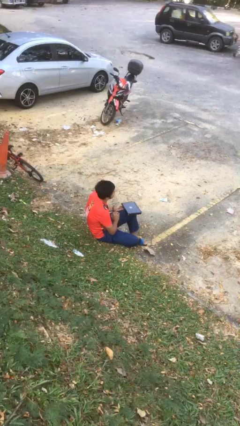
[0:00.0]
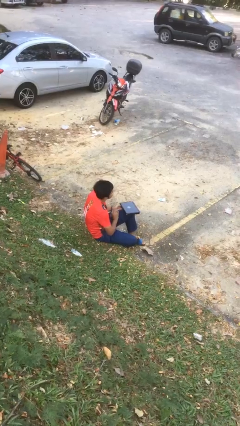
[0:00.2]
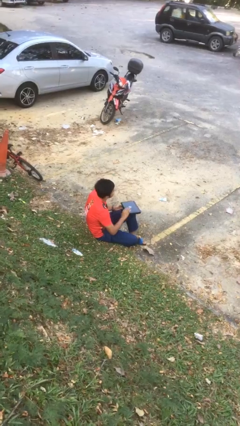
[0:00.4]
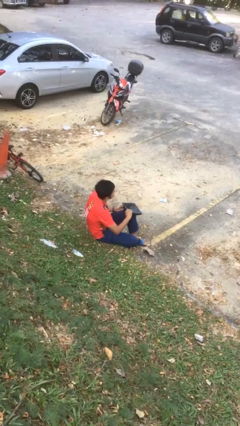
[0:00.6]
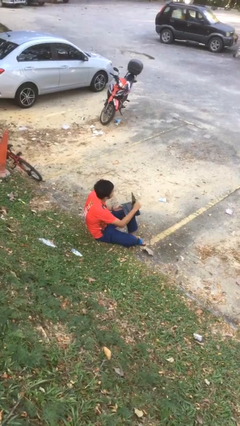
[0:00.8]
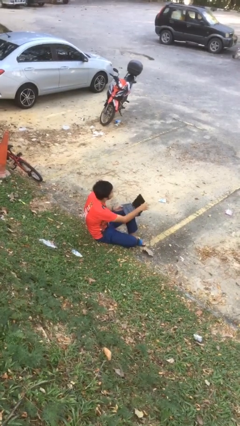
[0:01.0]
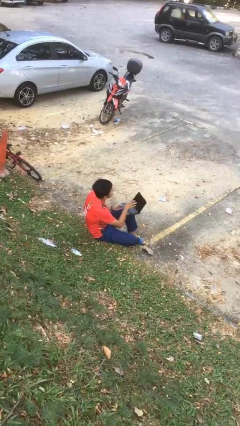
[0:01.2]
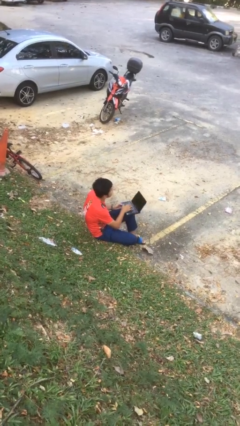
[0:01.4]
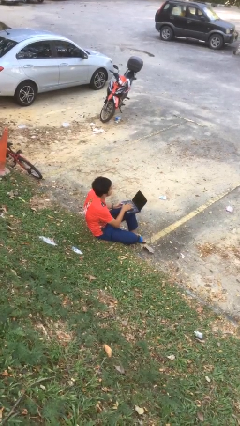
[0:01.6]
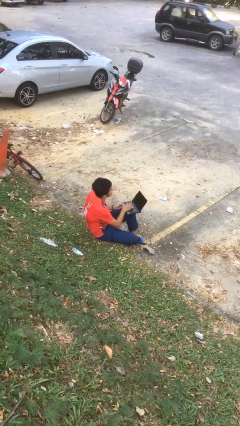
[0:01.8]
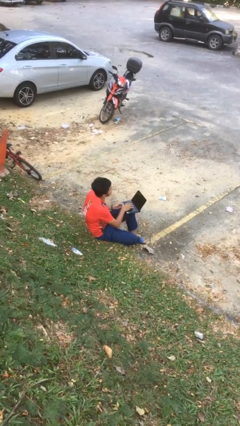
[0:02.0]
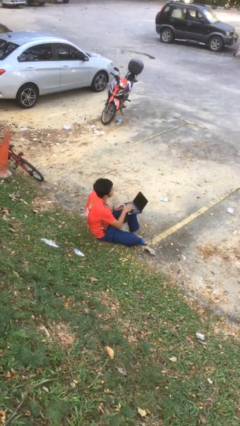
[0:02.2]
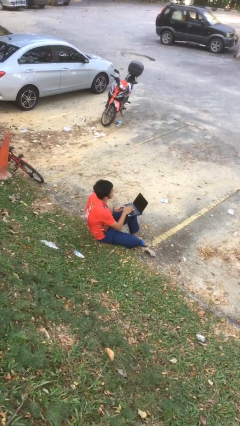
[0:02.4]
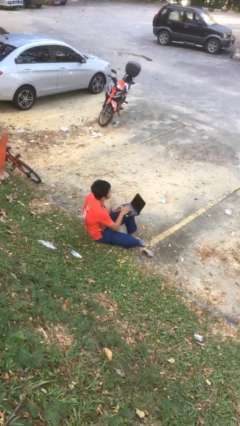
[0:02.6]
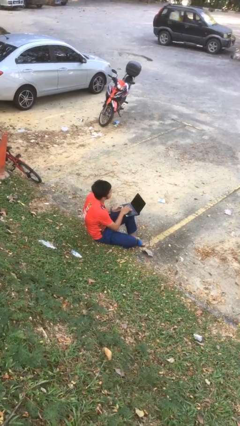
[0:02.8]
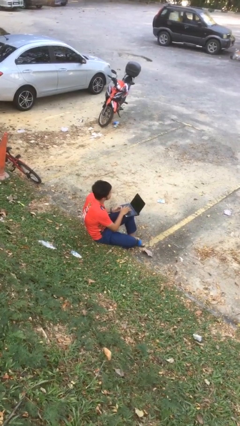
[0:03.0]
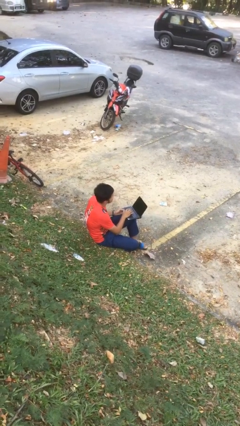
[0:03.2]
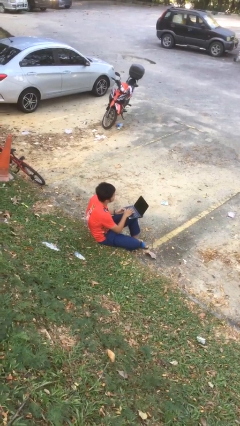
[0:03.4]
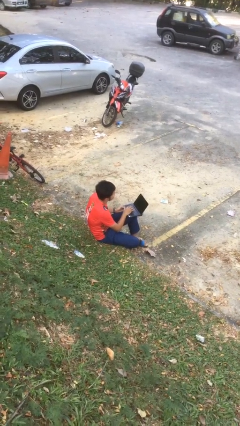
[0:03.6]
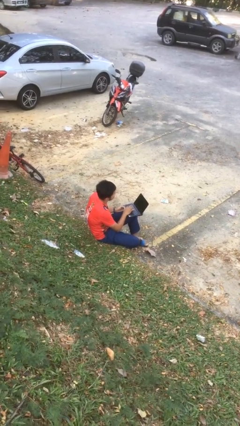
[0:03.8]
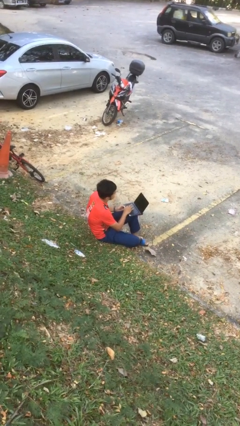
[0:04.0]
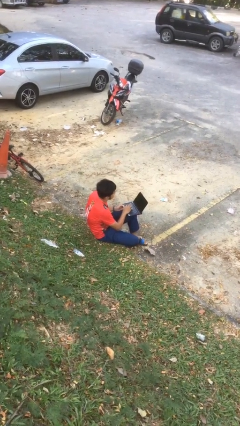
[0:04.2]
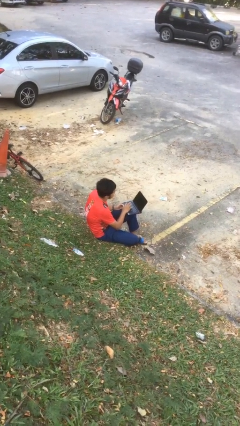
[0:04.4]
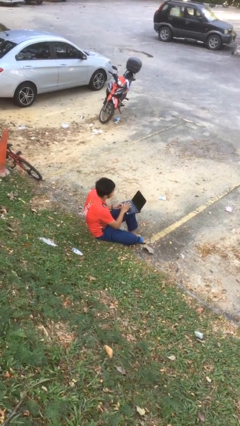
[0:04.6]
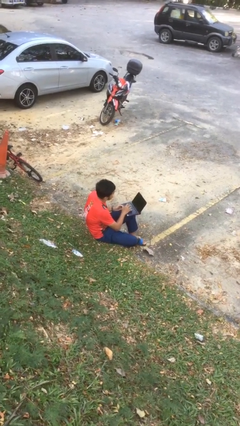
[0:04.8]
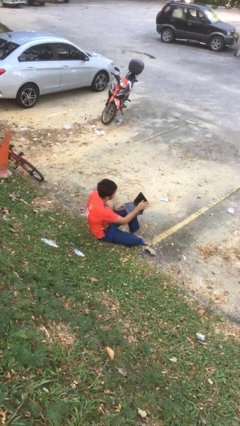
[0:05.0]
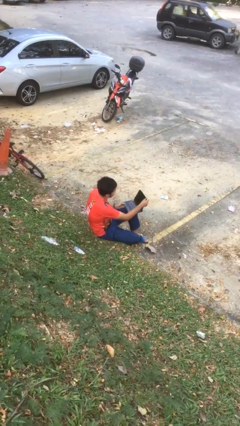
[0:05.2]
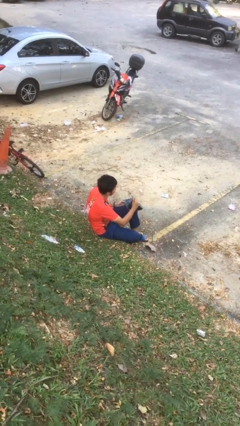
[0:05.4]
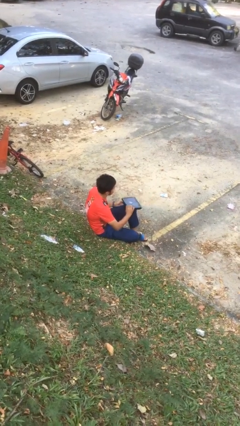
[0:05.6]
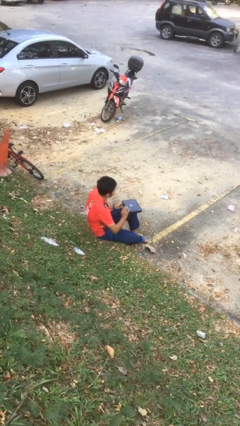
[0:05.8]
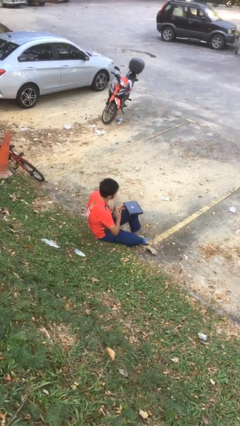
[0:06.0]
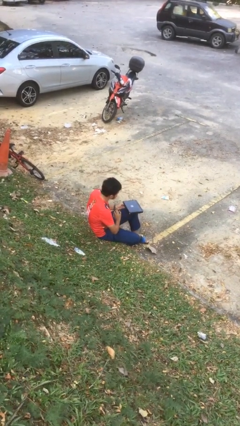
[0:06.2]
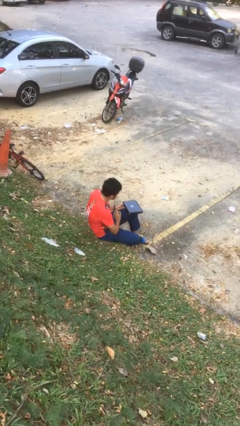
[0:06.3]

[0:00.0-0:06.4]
person interacts with laptop

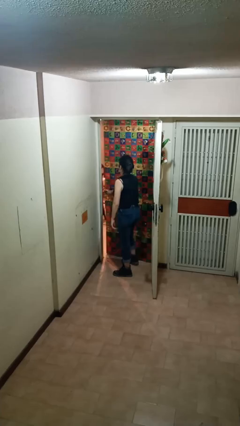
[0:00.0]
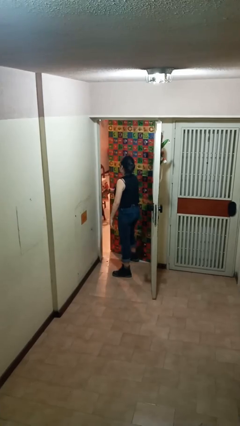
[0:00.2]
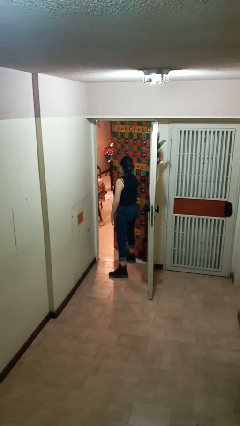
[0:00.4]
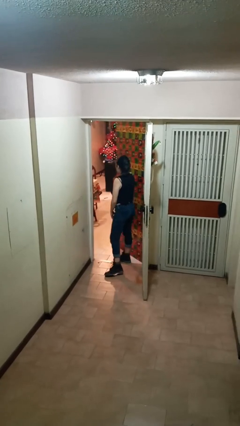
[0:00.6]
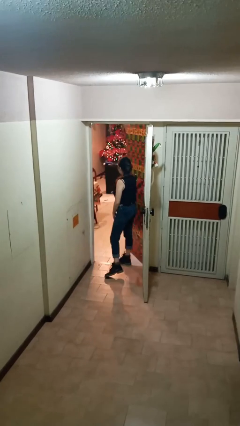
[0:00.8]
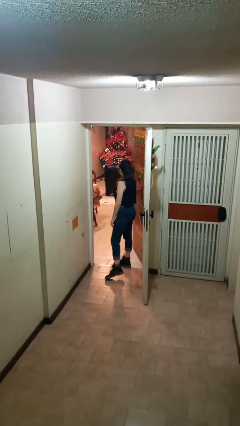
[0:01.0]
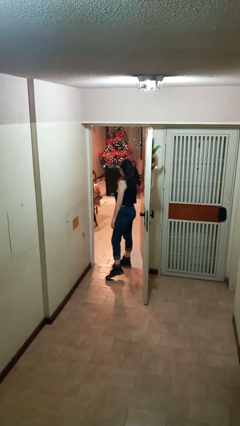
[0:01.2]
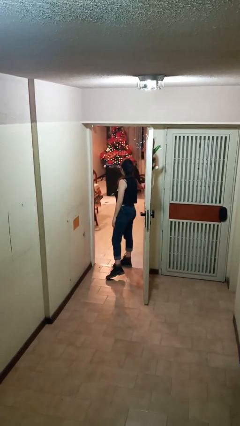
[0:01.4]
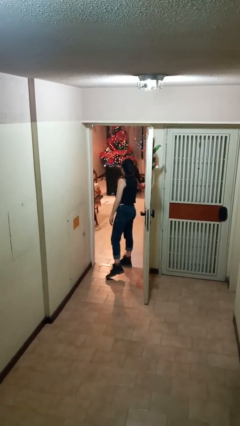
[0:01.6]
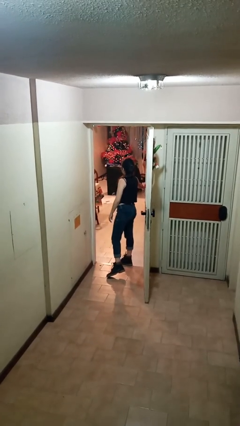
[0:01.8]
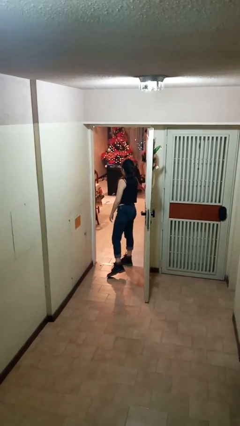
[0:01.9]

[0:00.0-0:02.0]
person opens facility door

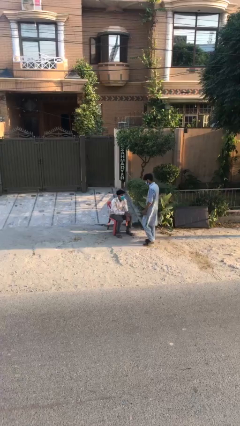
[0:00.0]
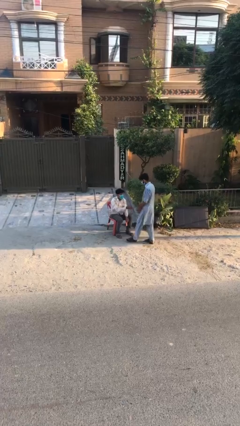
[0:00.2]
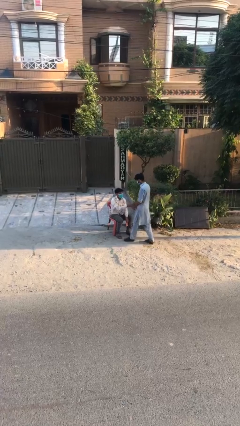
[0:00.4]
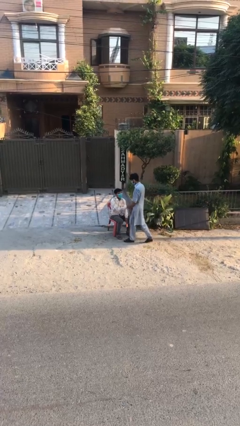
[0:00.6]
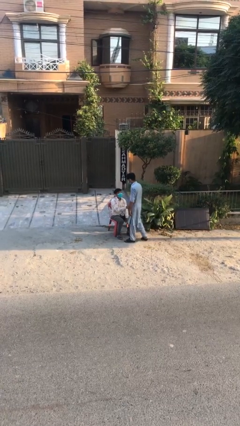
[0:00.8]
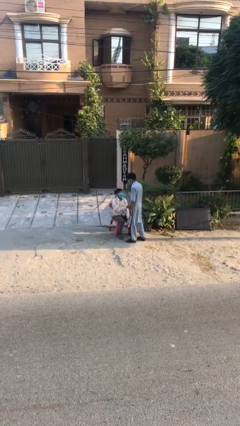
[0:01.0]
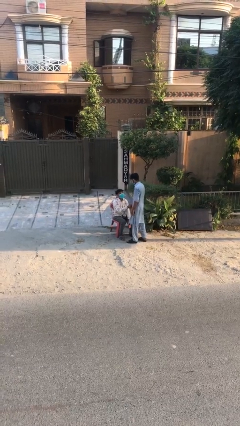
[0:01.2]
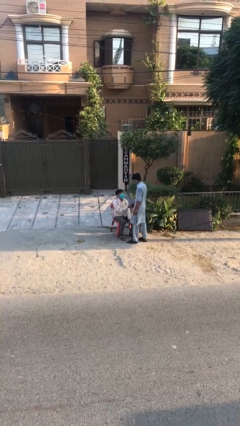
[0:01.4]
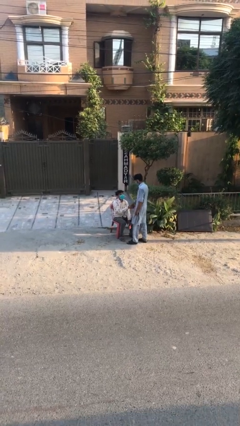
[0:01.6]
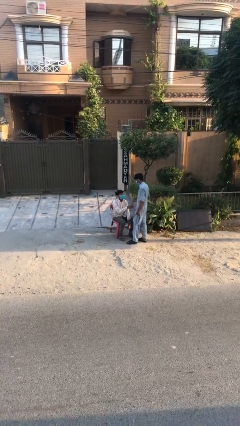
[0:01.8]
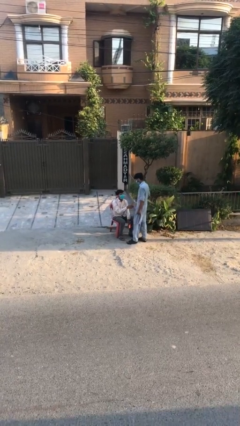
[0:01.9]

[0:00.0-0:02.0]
person shakes hand

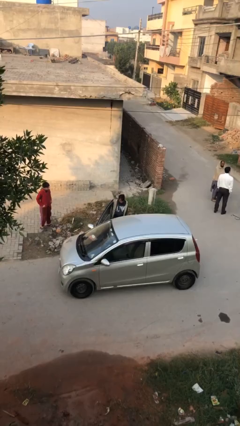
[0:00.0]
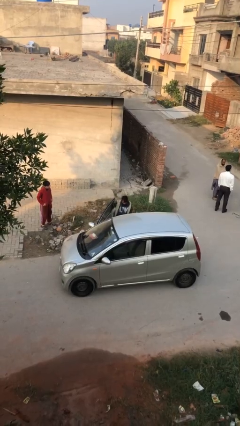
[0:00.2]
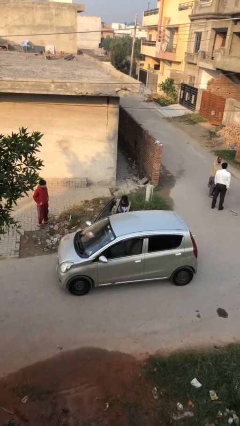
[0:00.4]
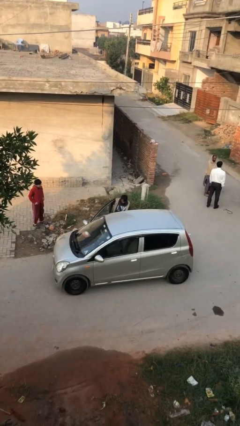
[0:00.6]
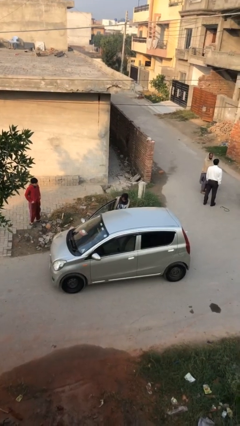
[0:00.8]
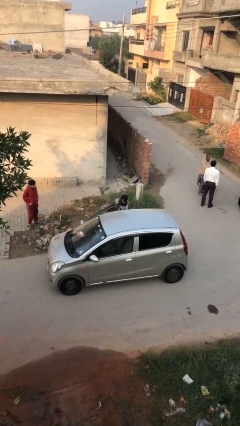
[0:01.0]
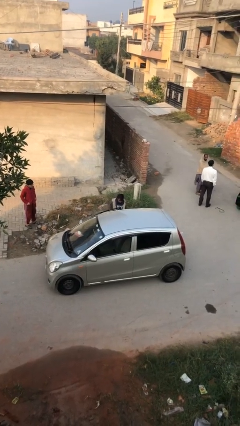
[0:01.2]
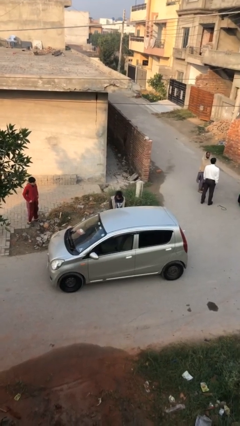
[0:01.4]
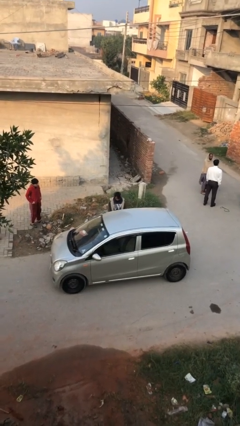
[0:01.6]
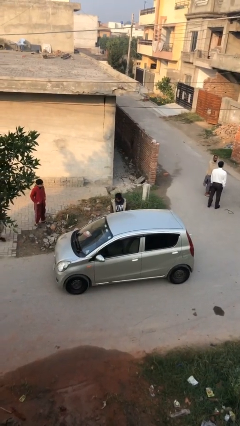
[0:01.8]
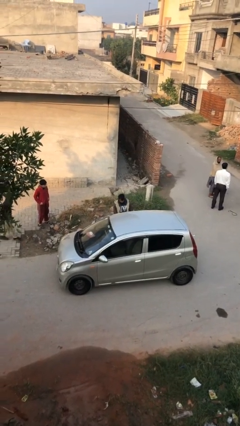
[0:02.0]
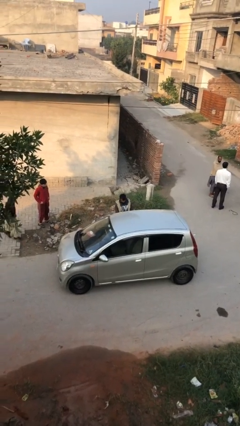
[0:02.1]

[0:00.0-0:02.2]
person closes car door

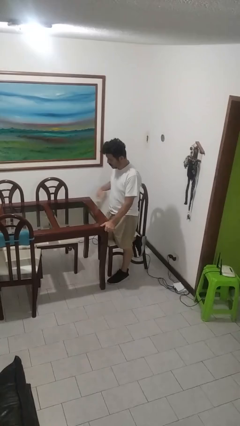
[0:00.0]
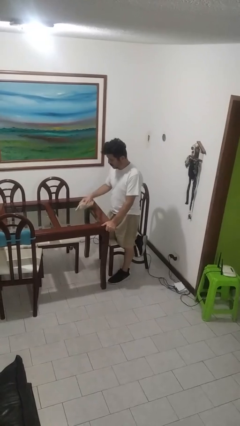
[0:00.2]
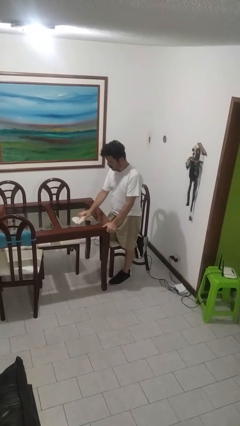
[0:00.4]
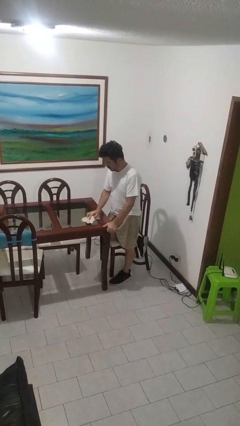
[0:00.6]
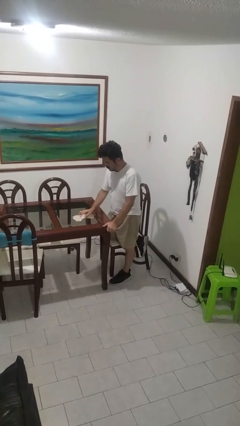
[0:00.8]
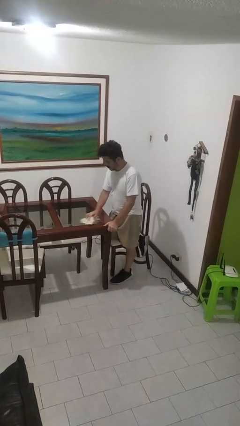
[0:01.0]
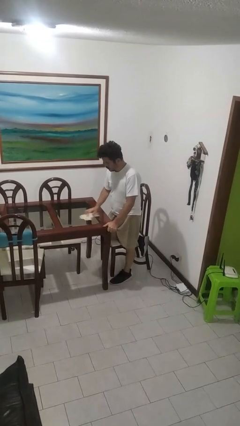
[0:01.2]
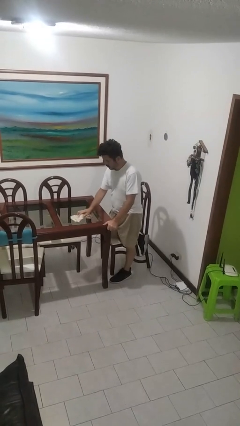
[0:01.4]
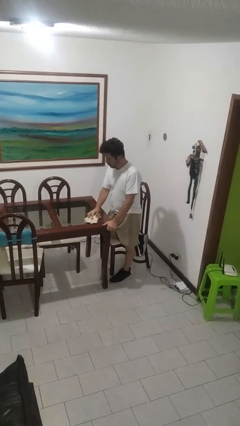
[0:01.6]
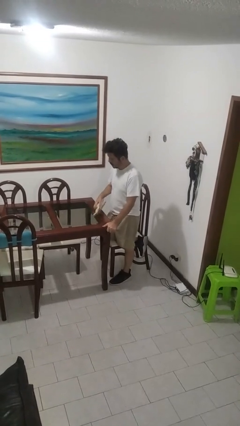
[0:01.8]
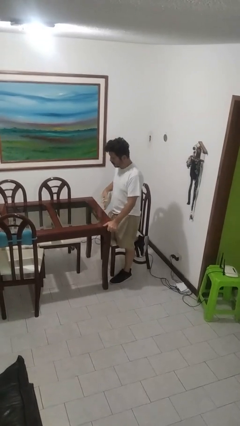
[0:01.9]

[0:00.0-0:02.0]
person cleans table with rag

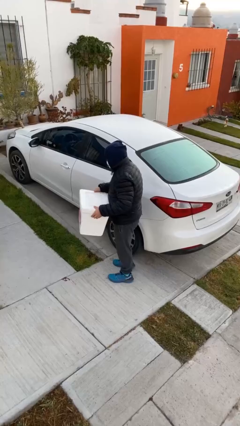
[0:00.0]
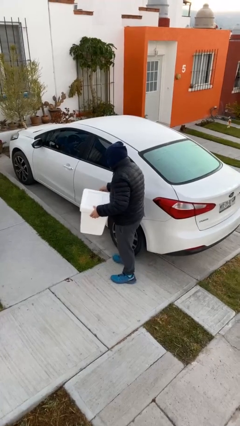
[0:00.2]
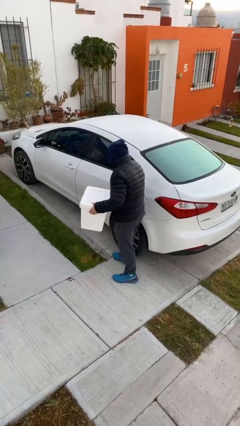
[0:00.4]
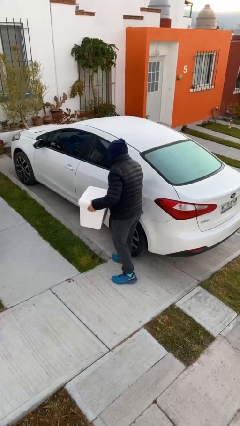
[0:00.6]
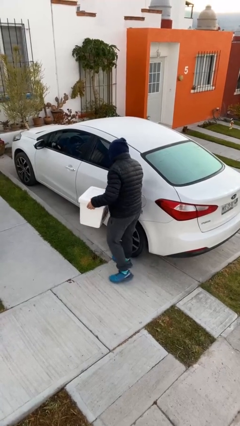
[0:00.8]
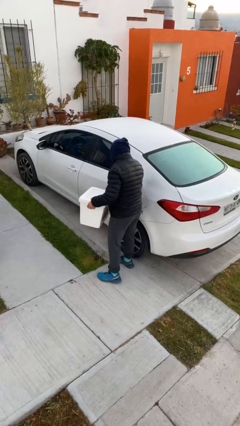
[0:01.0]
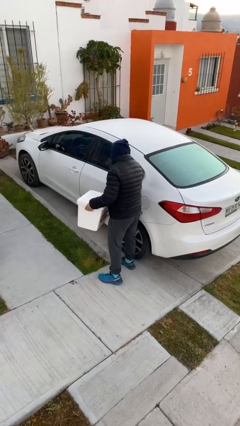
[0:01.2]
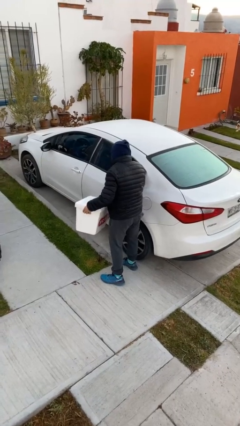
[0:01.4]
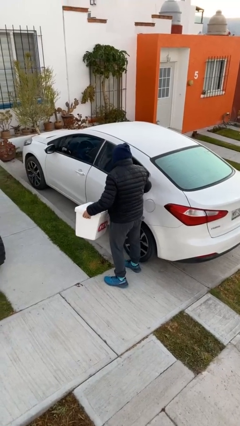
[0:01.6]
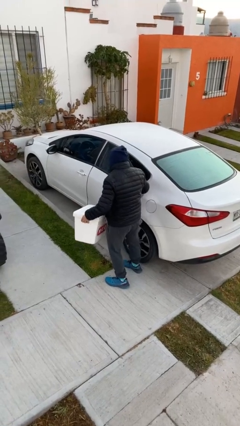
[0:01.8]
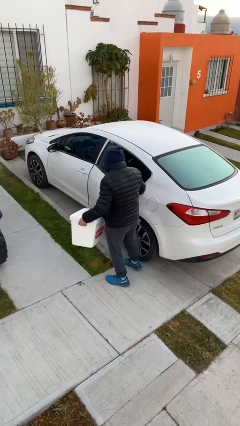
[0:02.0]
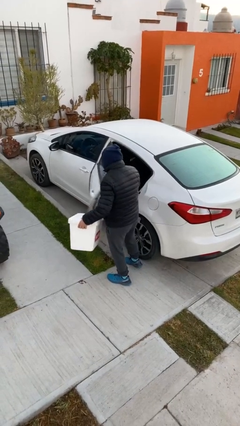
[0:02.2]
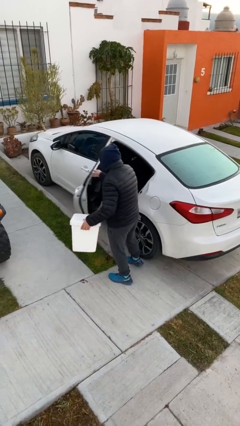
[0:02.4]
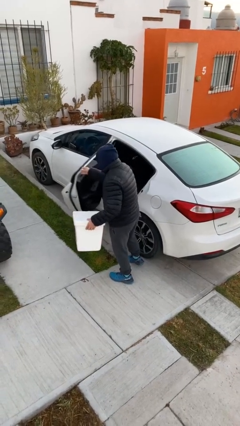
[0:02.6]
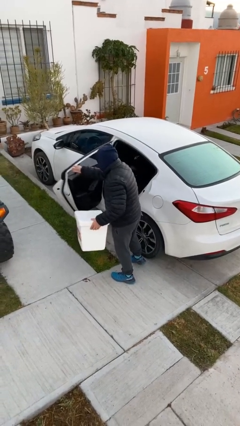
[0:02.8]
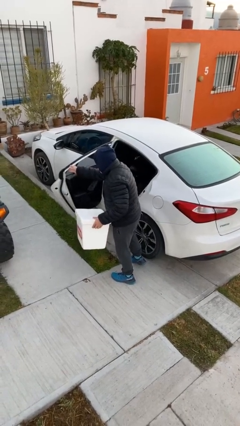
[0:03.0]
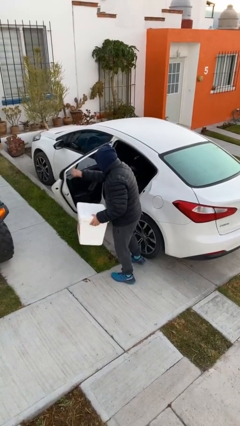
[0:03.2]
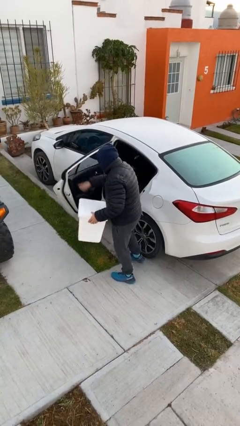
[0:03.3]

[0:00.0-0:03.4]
person opens car door
